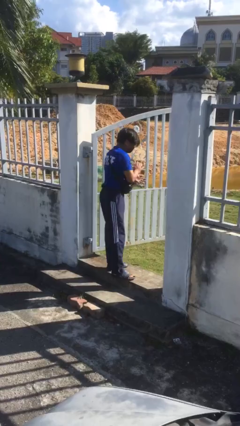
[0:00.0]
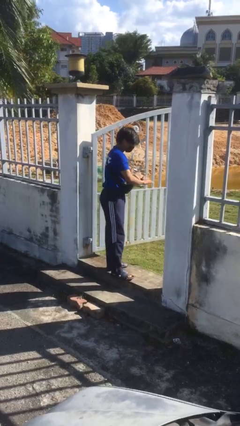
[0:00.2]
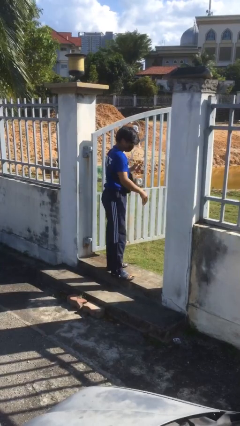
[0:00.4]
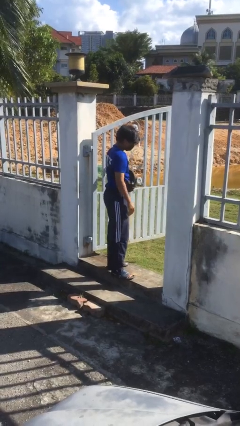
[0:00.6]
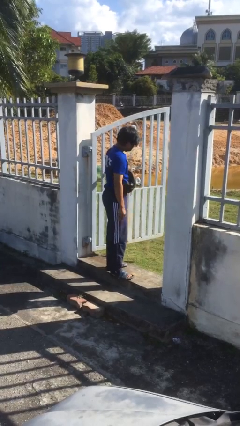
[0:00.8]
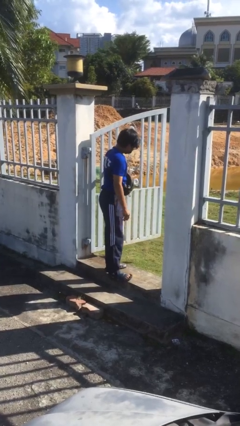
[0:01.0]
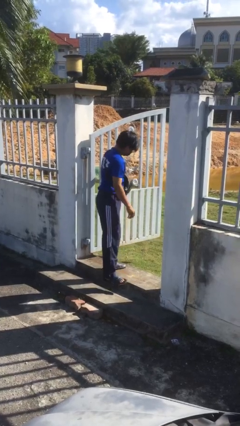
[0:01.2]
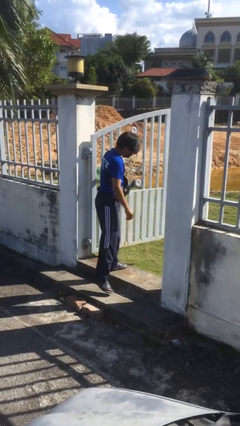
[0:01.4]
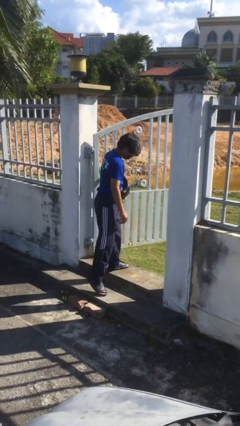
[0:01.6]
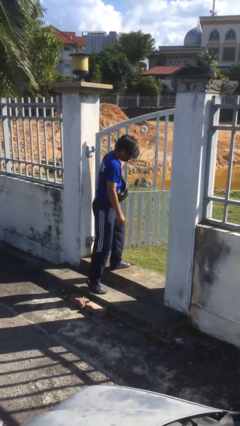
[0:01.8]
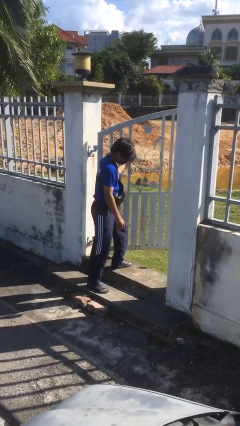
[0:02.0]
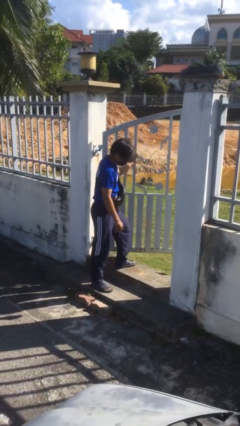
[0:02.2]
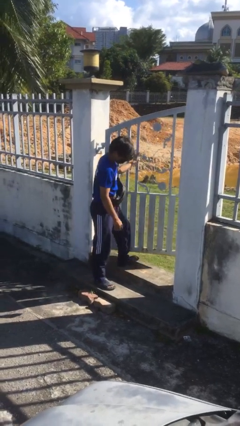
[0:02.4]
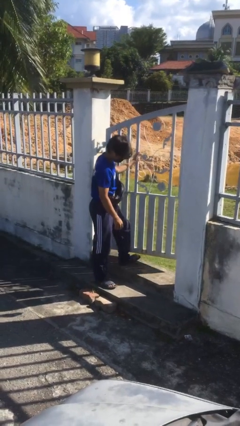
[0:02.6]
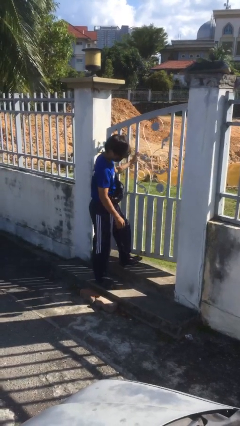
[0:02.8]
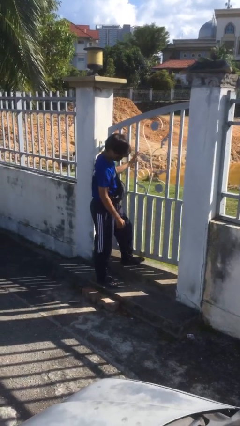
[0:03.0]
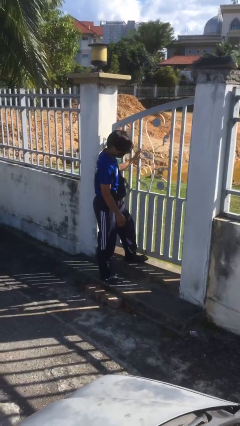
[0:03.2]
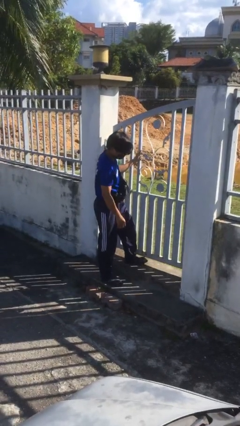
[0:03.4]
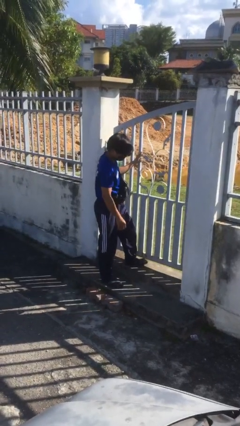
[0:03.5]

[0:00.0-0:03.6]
person closes facility door

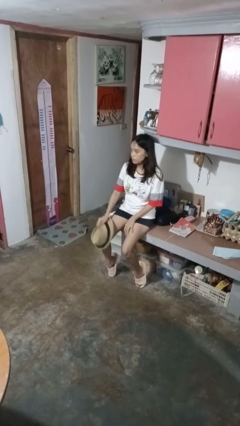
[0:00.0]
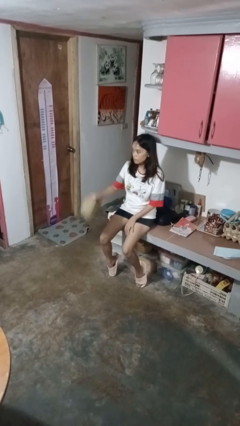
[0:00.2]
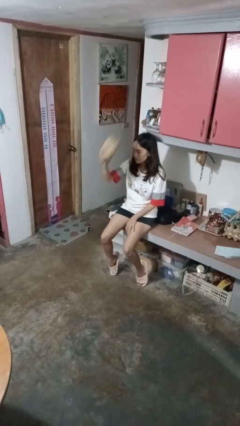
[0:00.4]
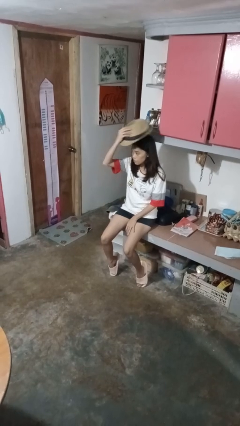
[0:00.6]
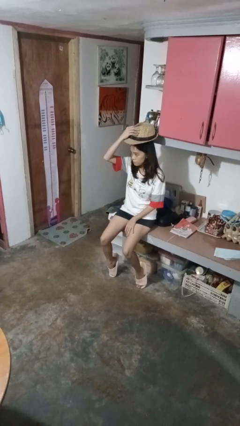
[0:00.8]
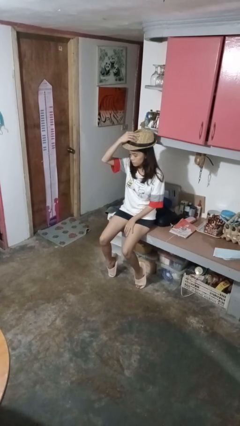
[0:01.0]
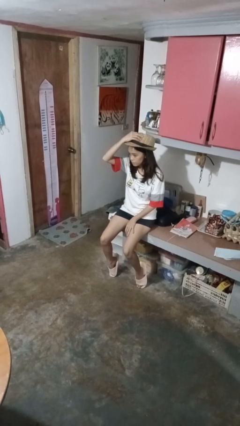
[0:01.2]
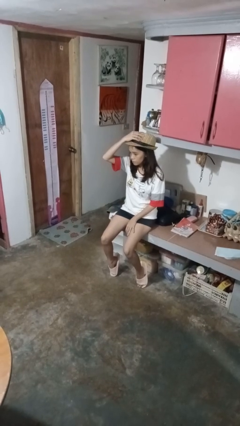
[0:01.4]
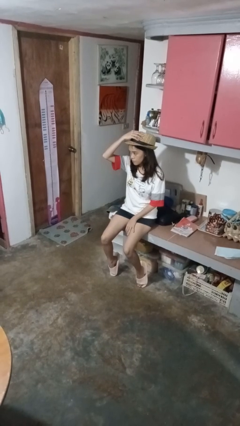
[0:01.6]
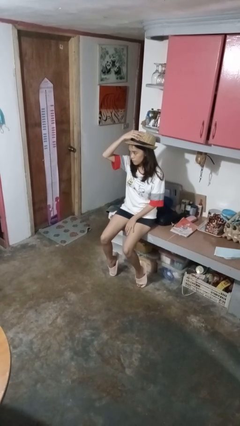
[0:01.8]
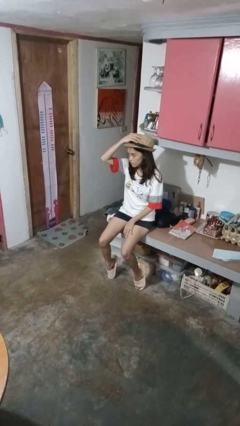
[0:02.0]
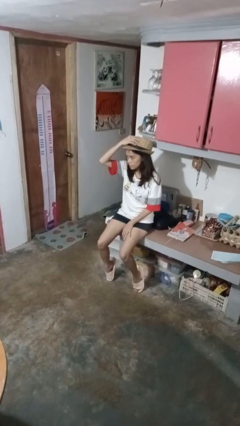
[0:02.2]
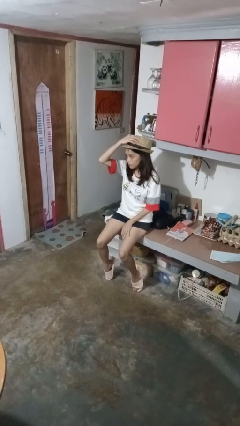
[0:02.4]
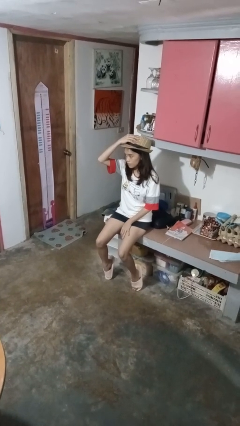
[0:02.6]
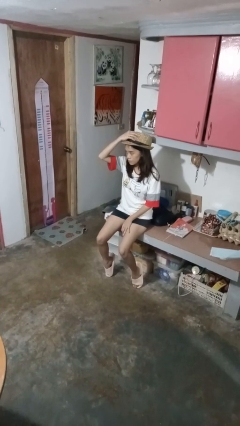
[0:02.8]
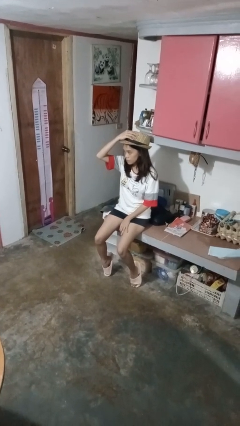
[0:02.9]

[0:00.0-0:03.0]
person puts on hat

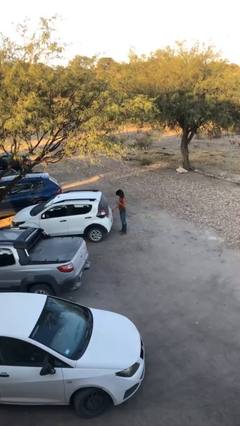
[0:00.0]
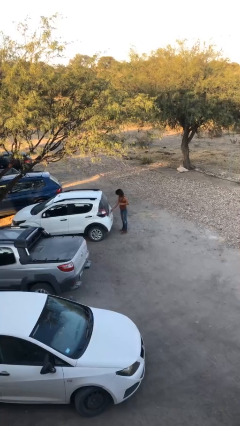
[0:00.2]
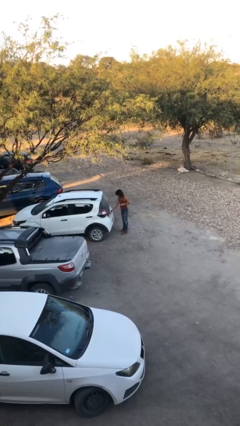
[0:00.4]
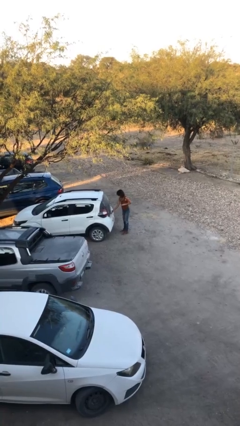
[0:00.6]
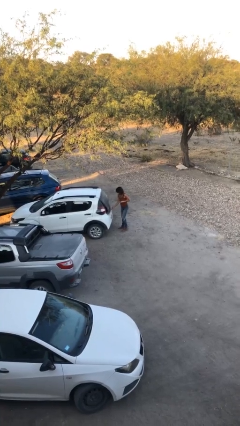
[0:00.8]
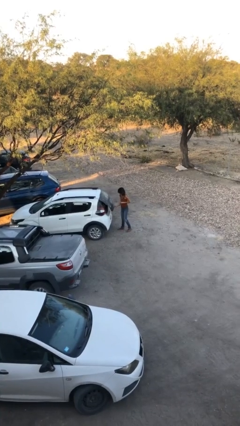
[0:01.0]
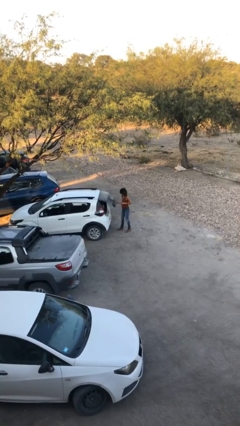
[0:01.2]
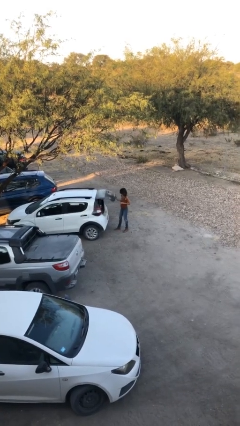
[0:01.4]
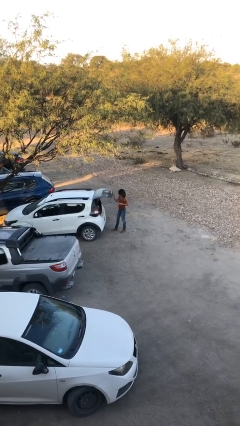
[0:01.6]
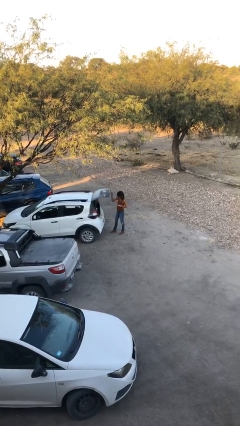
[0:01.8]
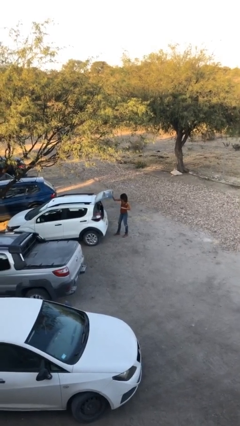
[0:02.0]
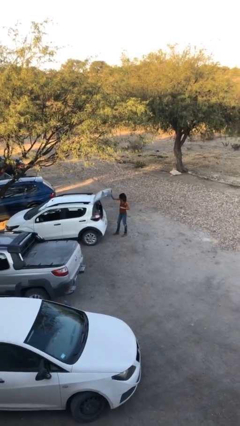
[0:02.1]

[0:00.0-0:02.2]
person opens car trunk

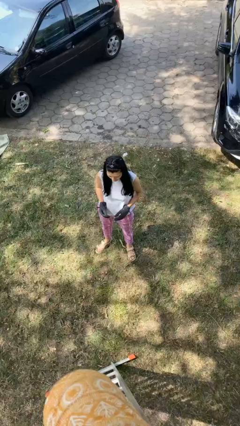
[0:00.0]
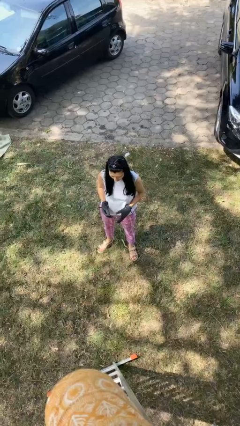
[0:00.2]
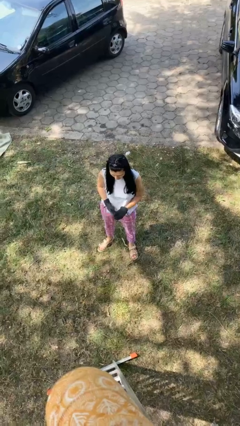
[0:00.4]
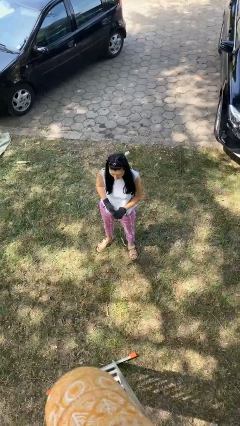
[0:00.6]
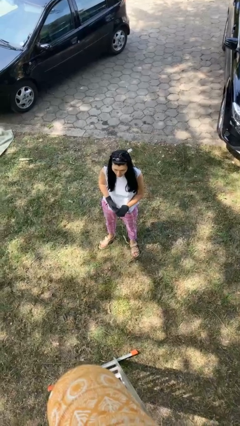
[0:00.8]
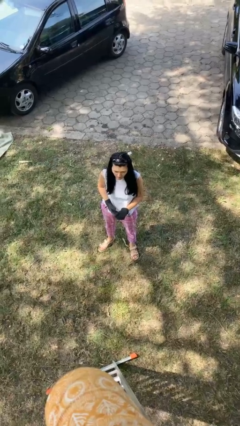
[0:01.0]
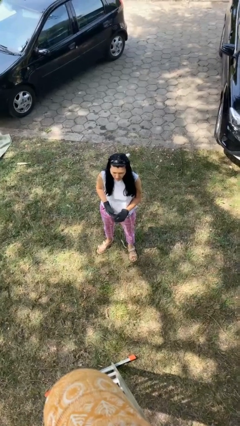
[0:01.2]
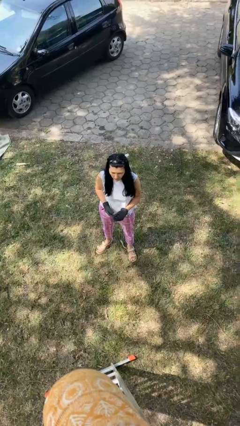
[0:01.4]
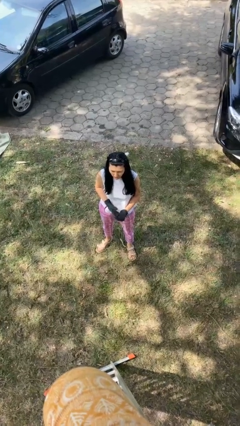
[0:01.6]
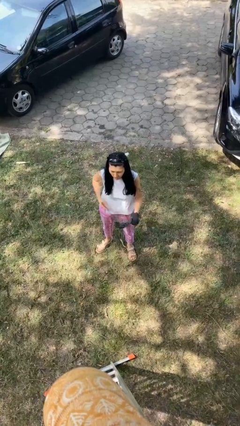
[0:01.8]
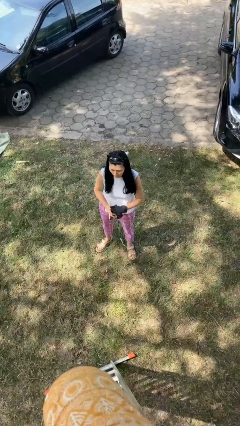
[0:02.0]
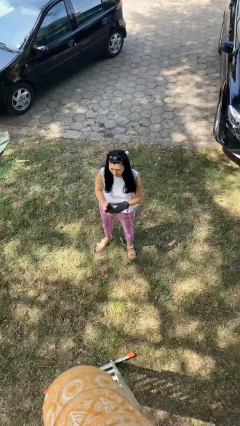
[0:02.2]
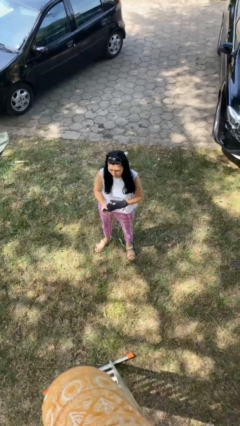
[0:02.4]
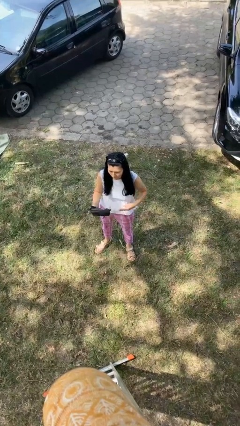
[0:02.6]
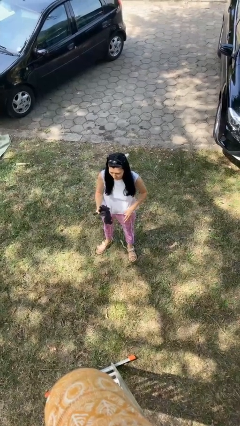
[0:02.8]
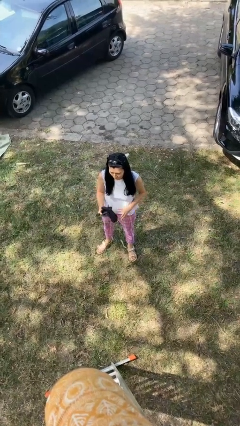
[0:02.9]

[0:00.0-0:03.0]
person takes off gloves

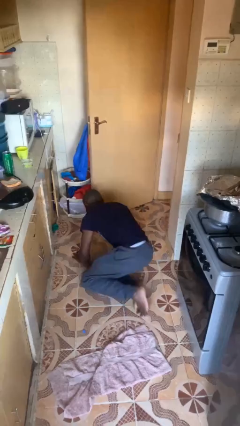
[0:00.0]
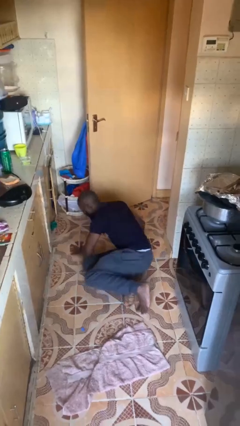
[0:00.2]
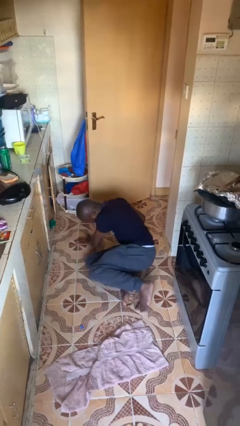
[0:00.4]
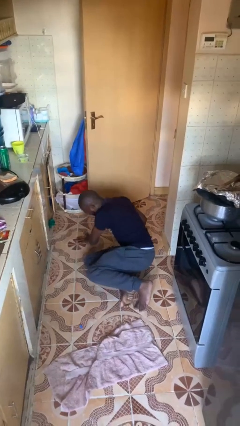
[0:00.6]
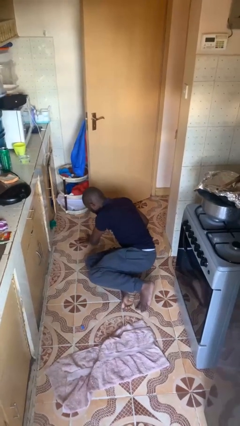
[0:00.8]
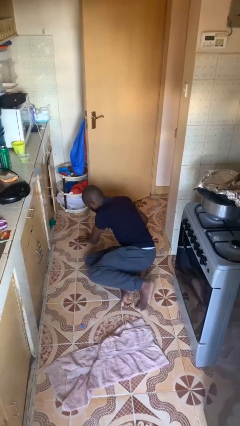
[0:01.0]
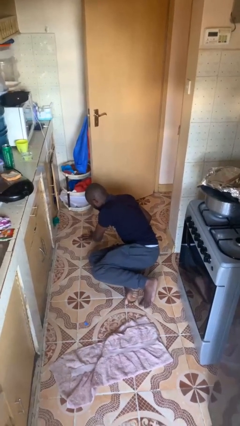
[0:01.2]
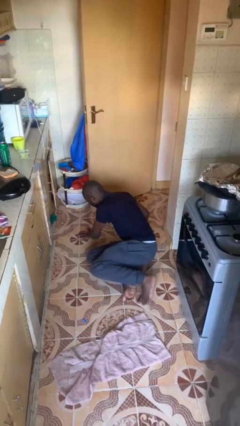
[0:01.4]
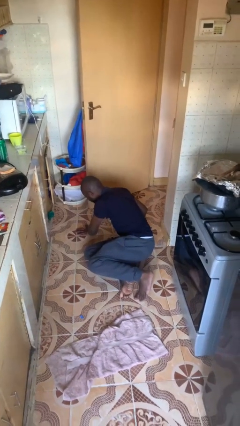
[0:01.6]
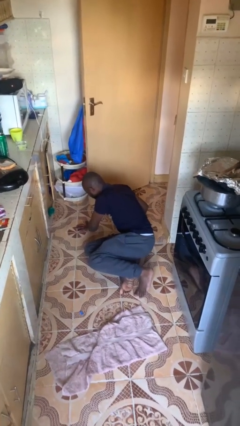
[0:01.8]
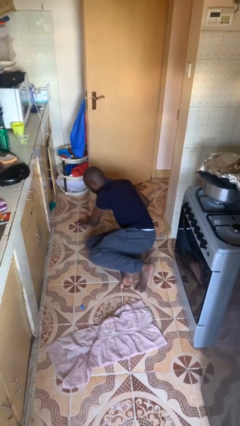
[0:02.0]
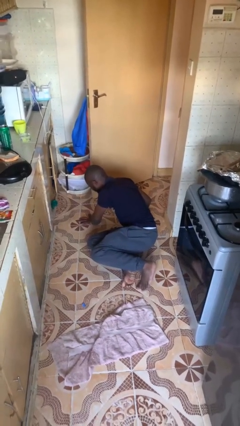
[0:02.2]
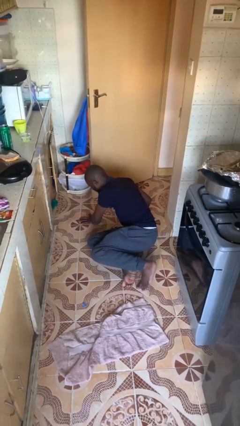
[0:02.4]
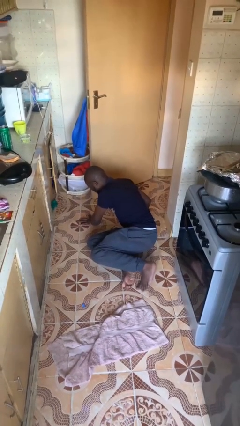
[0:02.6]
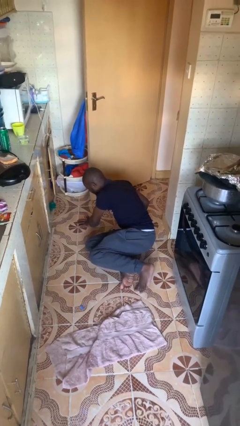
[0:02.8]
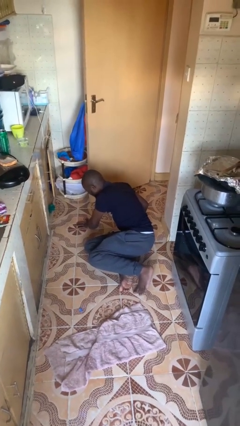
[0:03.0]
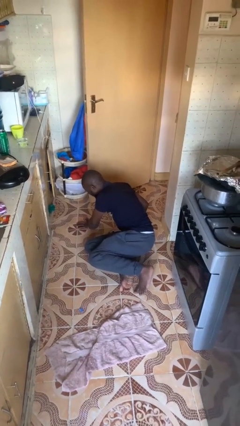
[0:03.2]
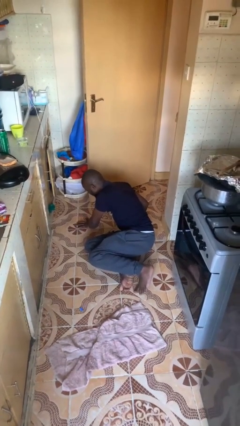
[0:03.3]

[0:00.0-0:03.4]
person lies down on floor

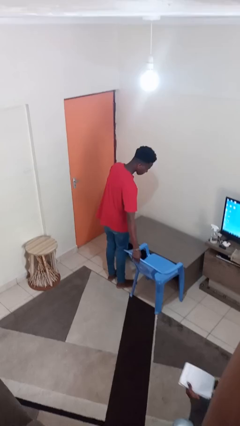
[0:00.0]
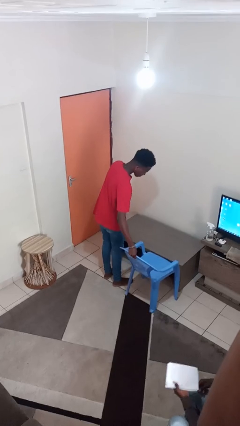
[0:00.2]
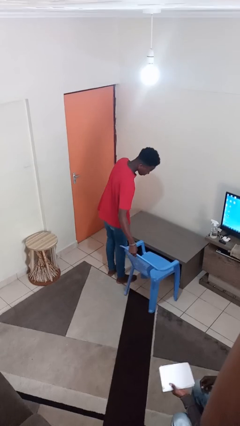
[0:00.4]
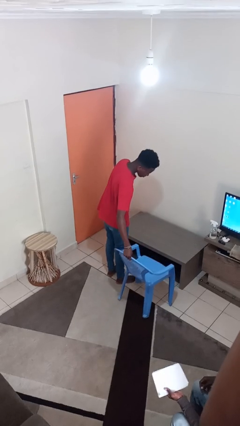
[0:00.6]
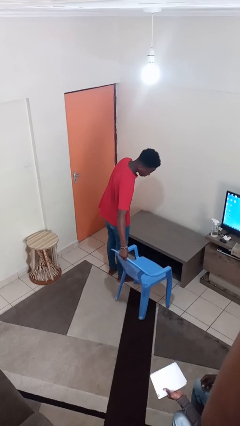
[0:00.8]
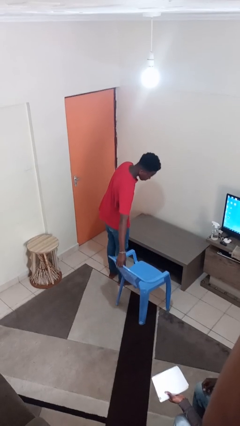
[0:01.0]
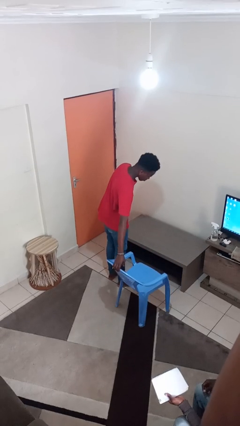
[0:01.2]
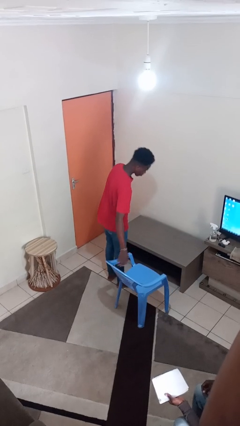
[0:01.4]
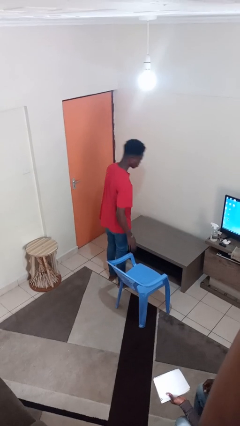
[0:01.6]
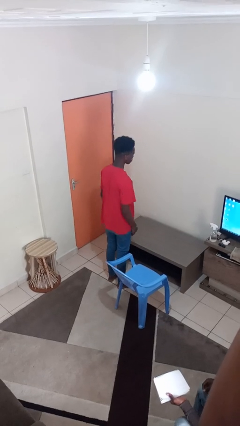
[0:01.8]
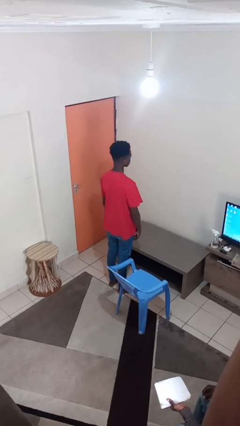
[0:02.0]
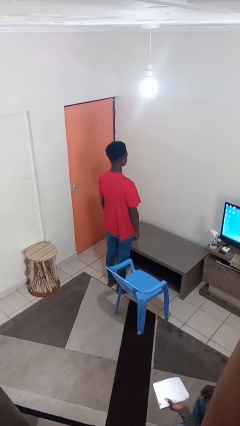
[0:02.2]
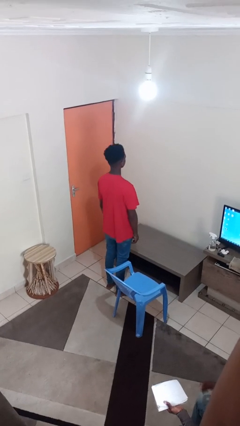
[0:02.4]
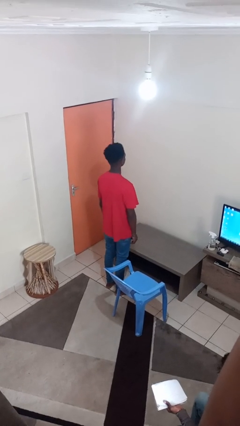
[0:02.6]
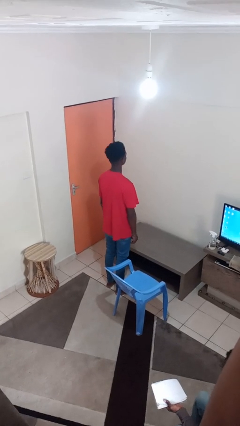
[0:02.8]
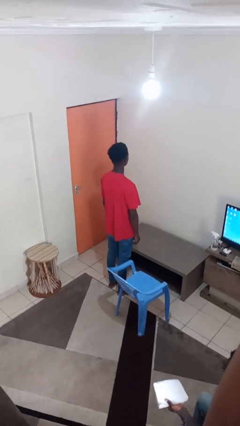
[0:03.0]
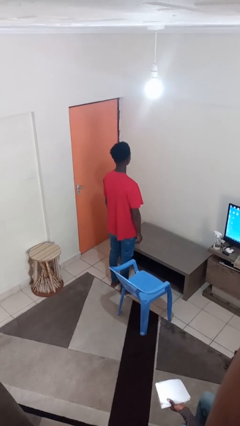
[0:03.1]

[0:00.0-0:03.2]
person pulls out chair
